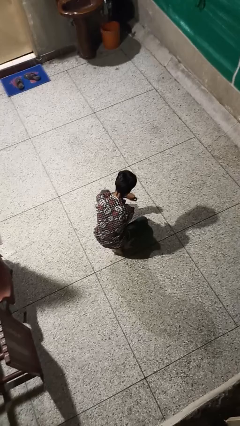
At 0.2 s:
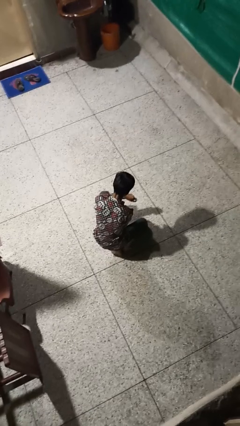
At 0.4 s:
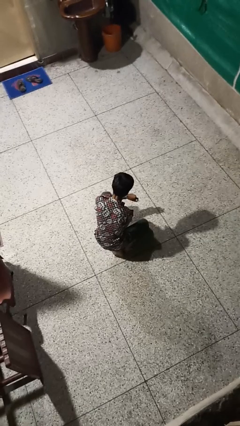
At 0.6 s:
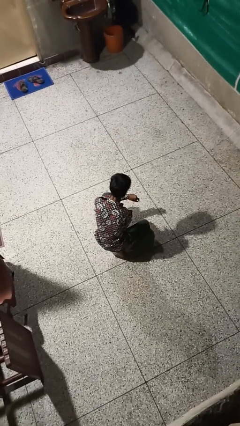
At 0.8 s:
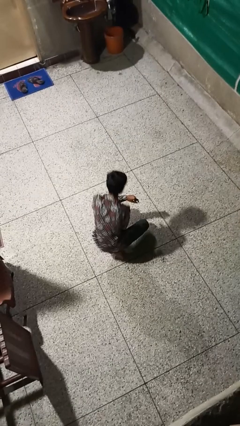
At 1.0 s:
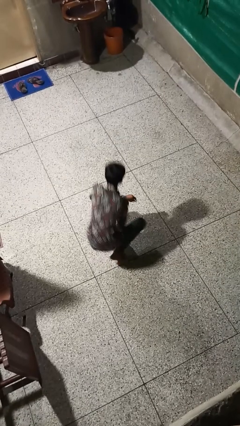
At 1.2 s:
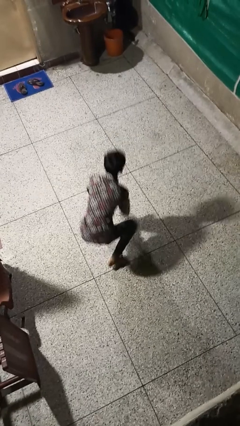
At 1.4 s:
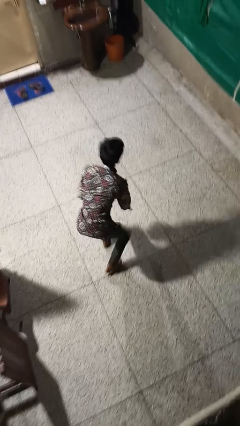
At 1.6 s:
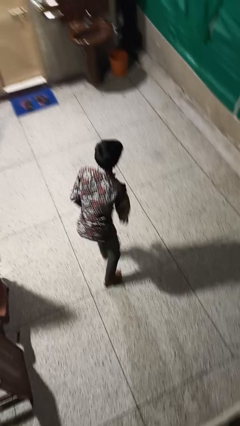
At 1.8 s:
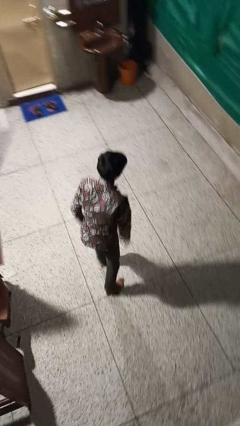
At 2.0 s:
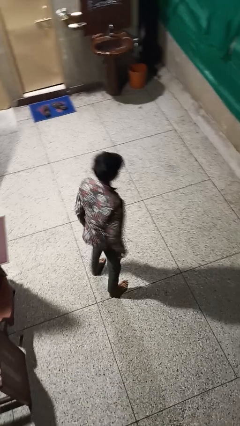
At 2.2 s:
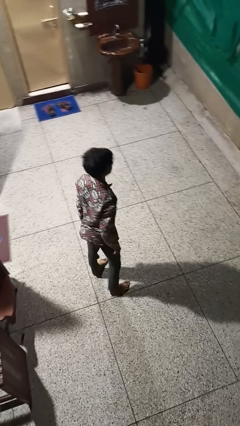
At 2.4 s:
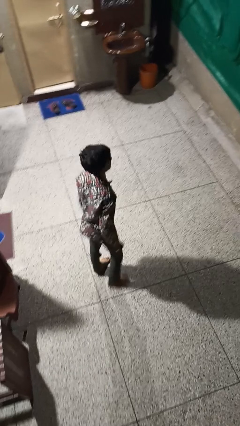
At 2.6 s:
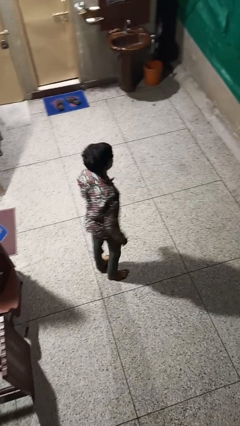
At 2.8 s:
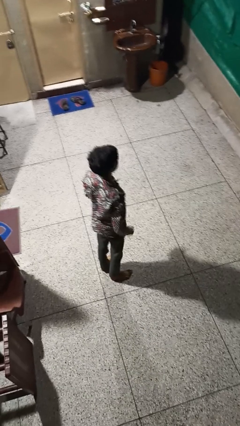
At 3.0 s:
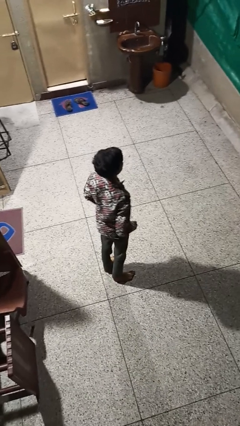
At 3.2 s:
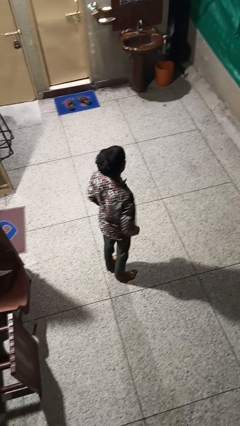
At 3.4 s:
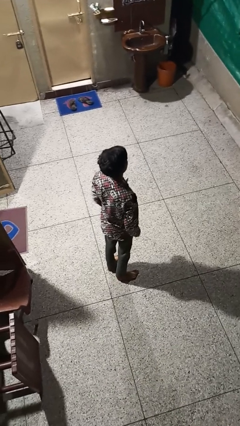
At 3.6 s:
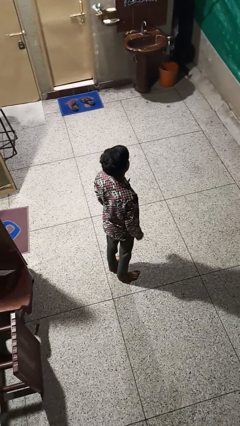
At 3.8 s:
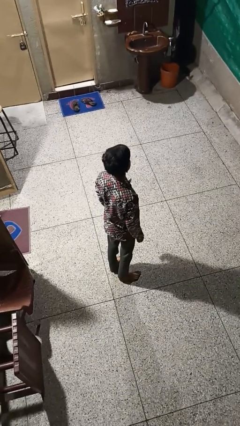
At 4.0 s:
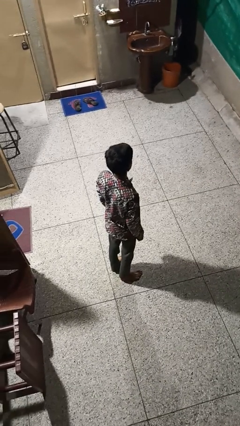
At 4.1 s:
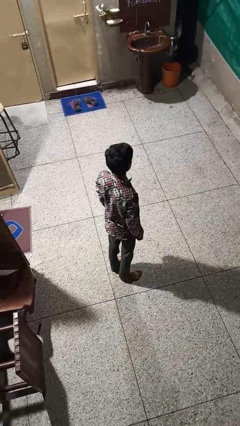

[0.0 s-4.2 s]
person stands up from floor

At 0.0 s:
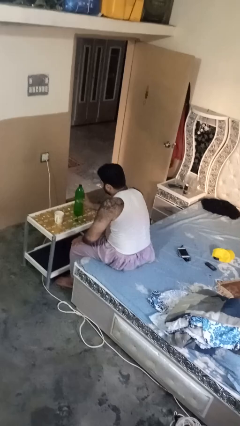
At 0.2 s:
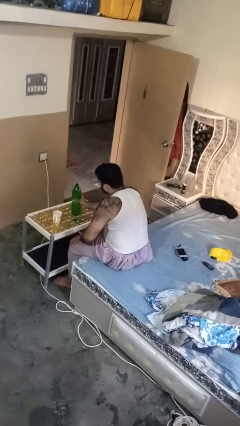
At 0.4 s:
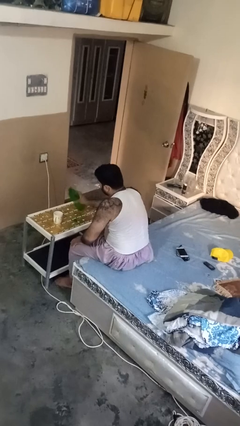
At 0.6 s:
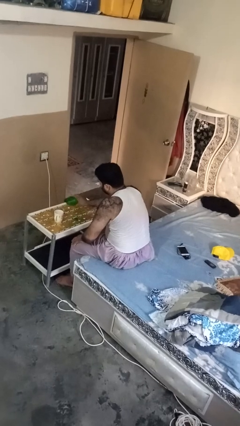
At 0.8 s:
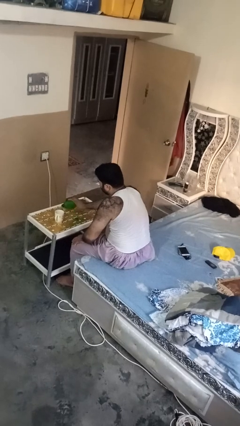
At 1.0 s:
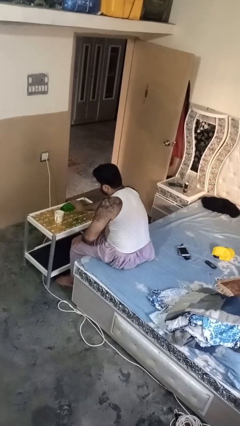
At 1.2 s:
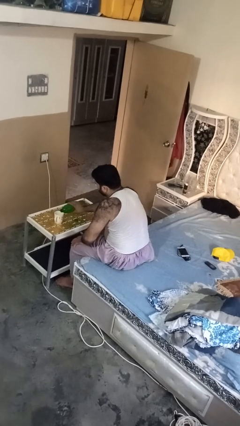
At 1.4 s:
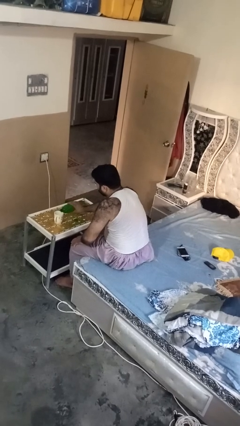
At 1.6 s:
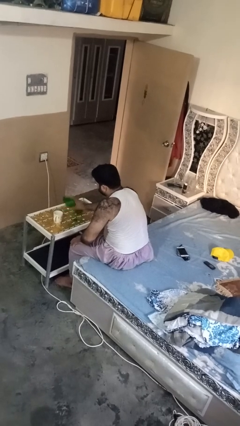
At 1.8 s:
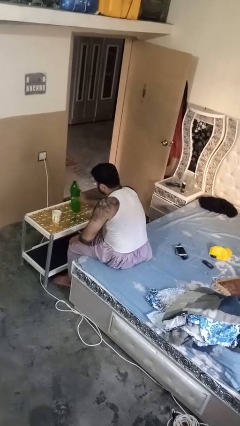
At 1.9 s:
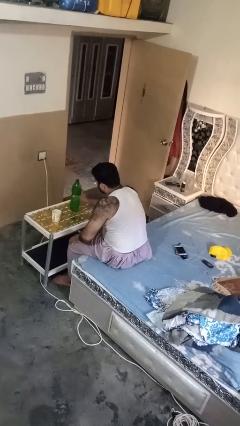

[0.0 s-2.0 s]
person pours liquid into cup

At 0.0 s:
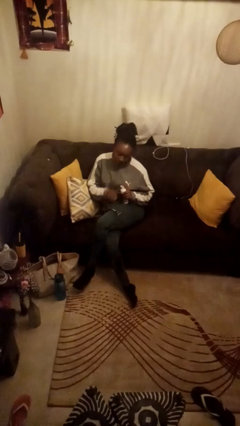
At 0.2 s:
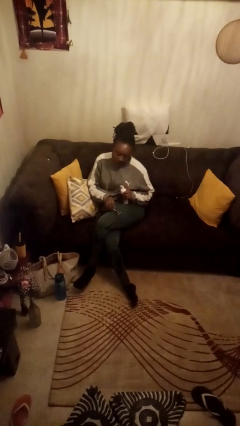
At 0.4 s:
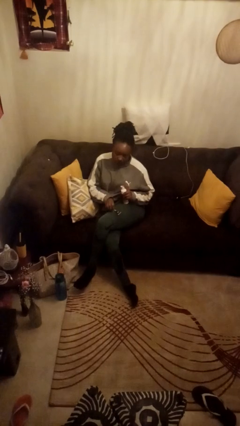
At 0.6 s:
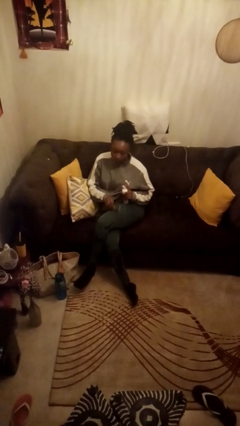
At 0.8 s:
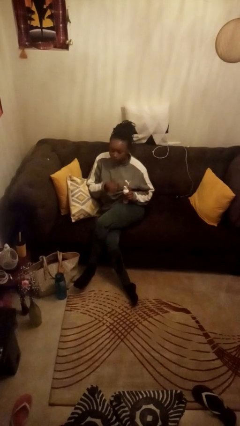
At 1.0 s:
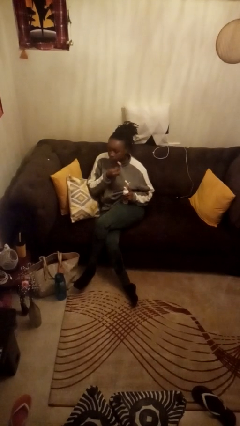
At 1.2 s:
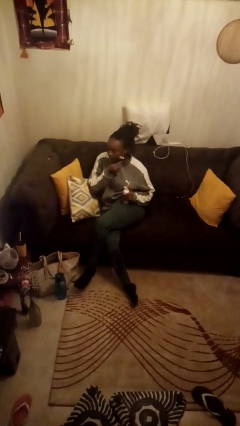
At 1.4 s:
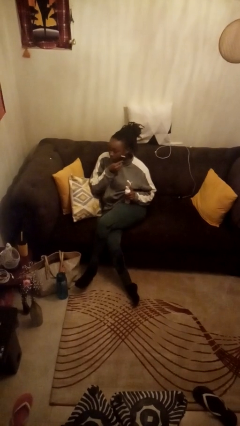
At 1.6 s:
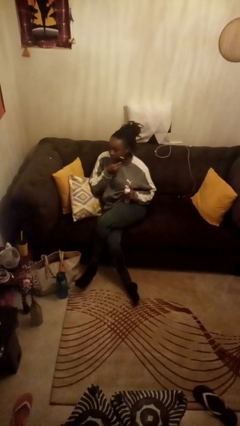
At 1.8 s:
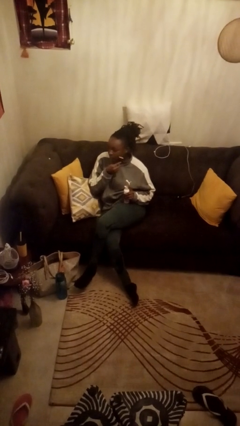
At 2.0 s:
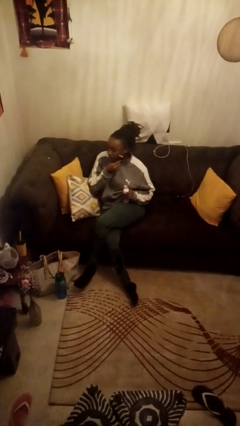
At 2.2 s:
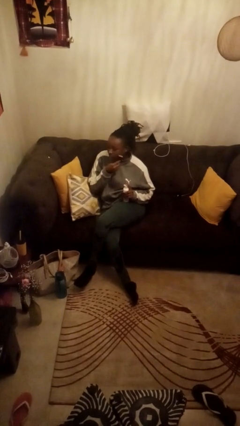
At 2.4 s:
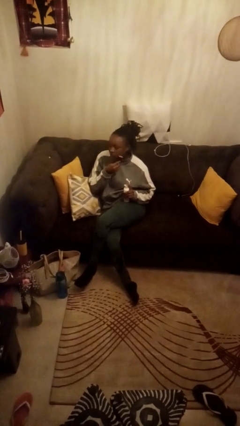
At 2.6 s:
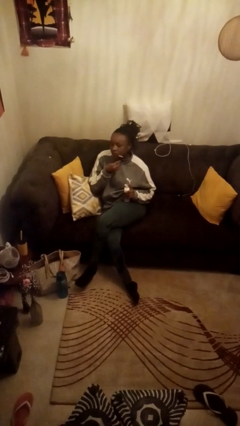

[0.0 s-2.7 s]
person shaves face

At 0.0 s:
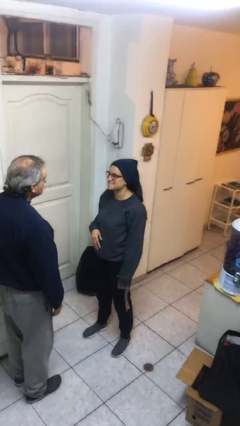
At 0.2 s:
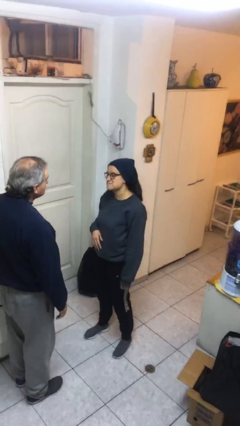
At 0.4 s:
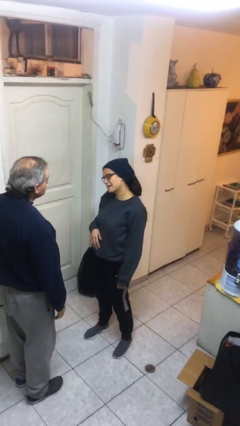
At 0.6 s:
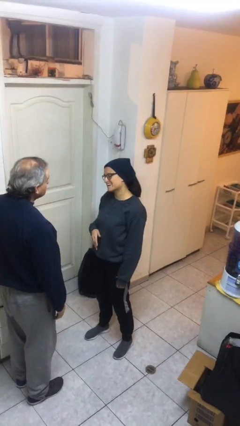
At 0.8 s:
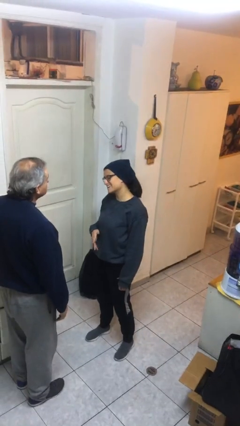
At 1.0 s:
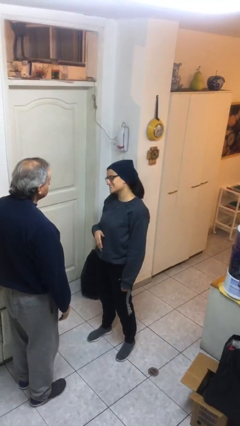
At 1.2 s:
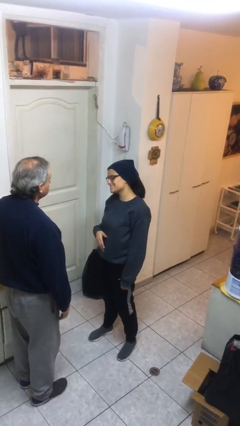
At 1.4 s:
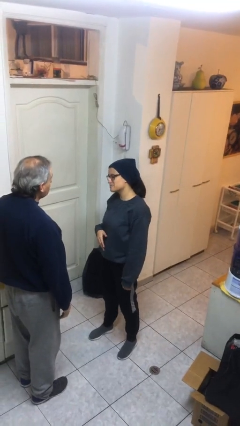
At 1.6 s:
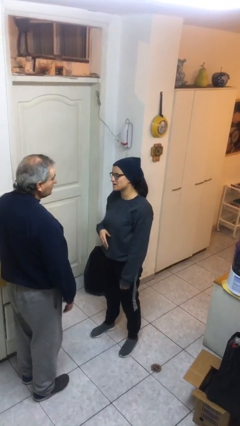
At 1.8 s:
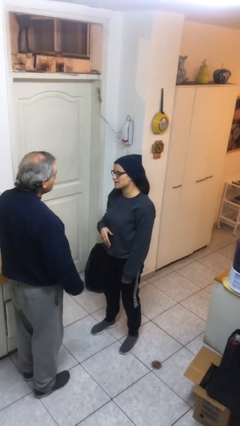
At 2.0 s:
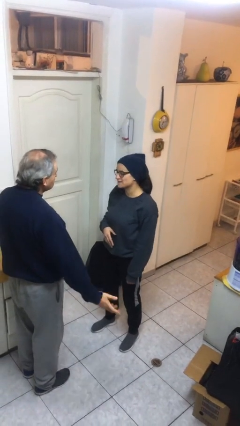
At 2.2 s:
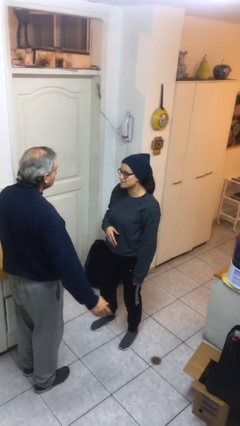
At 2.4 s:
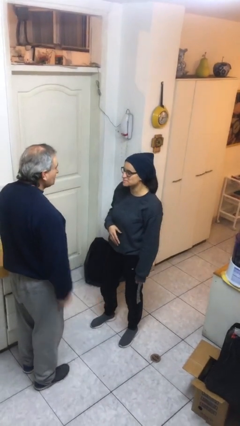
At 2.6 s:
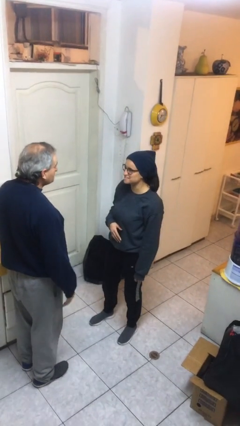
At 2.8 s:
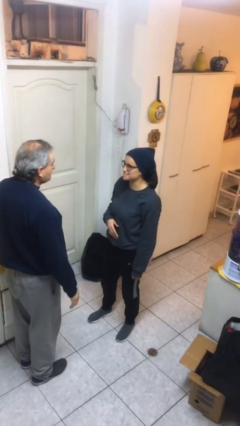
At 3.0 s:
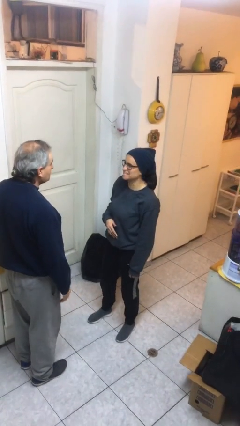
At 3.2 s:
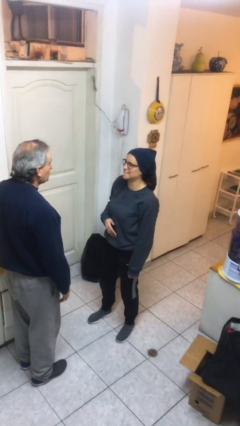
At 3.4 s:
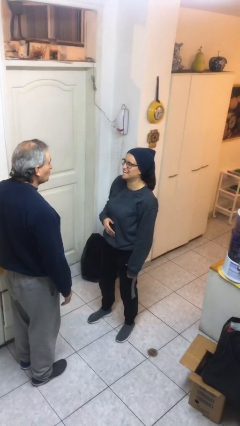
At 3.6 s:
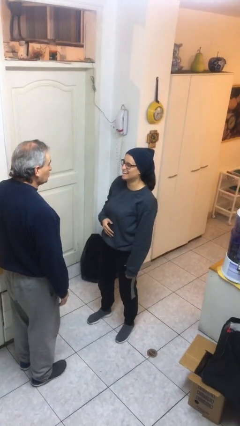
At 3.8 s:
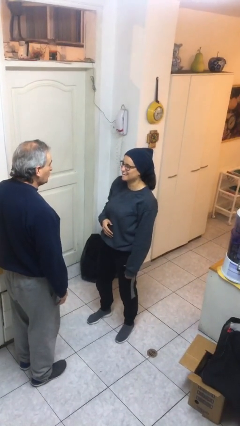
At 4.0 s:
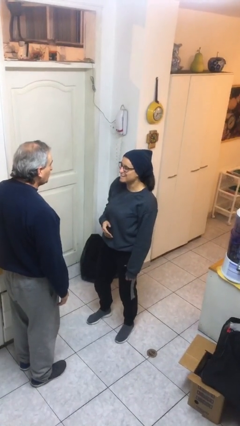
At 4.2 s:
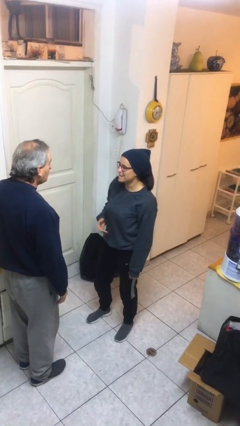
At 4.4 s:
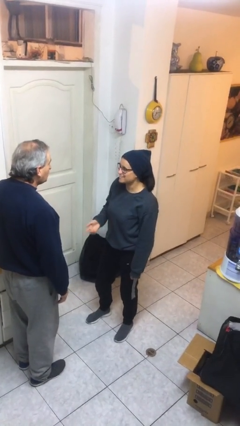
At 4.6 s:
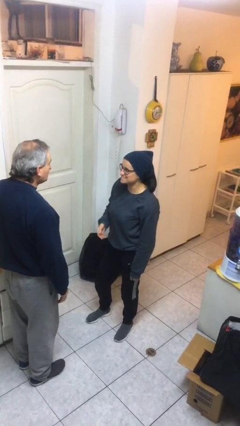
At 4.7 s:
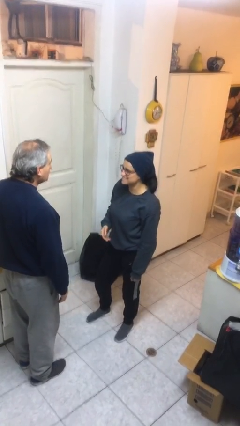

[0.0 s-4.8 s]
person talks to person

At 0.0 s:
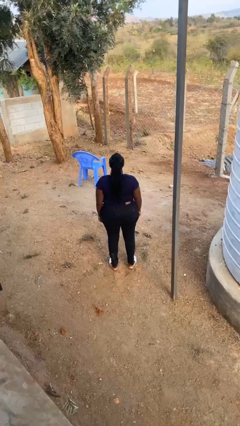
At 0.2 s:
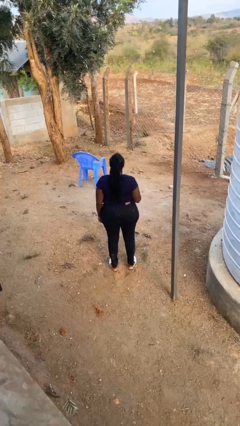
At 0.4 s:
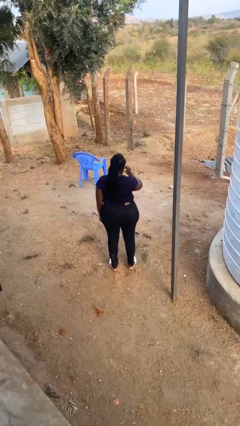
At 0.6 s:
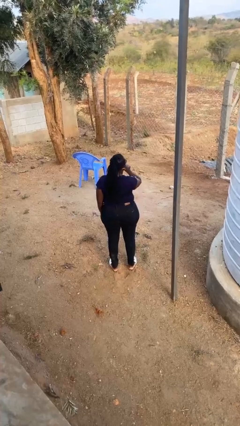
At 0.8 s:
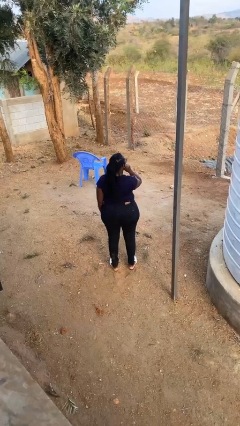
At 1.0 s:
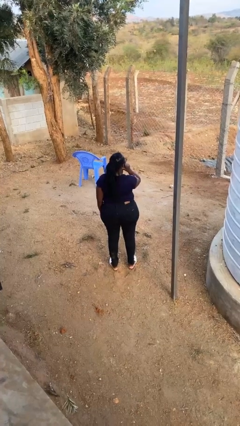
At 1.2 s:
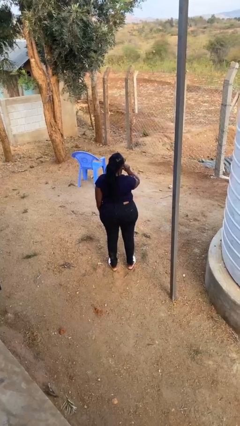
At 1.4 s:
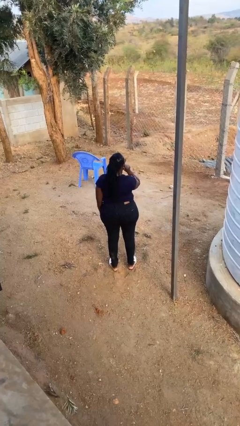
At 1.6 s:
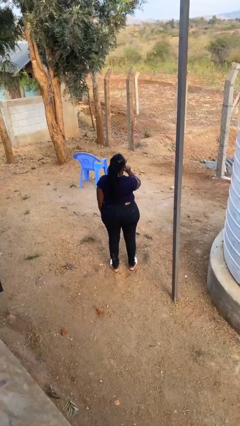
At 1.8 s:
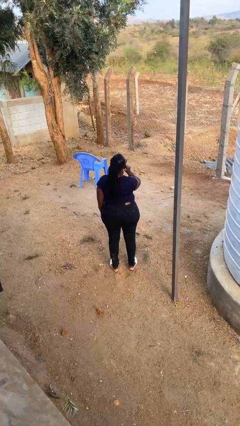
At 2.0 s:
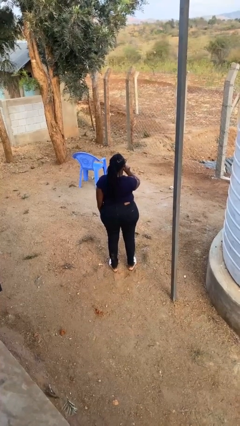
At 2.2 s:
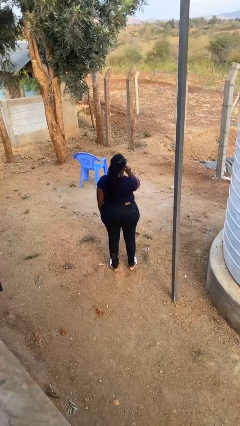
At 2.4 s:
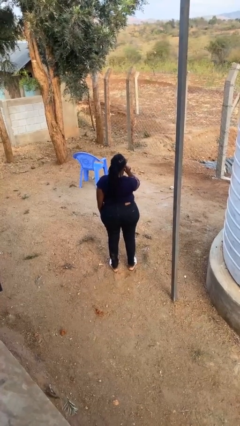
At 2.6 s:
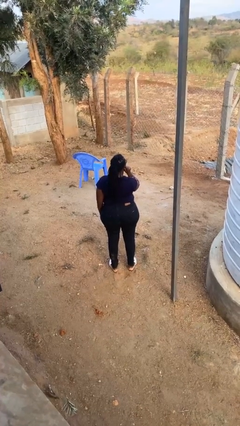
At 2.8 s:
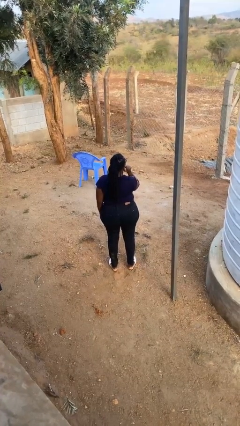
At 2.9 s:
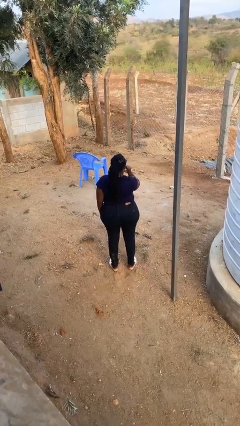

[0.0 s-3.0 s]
person touches earlobe

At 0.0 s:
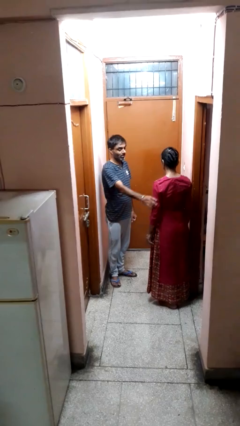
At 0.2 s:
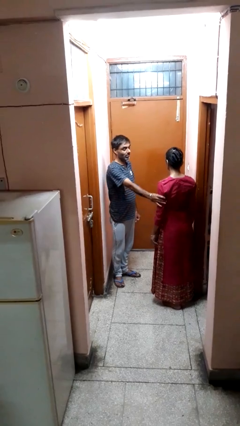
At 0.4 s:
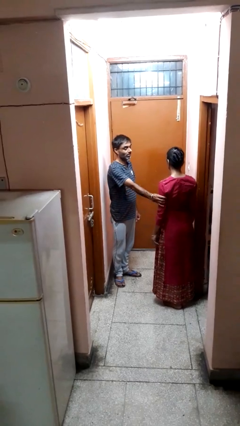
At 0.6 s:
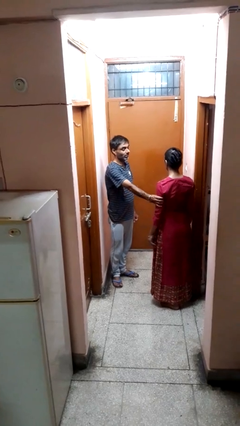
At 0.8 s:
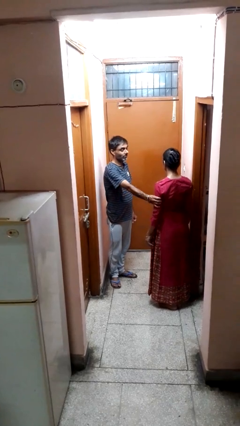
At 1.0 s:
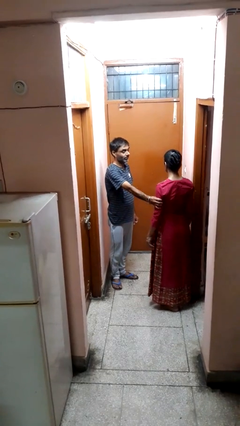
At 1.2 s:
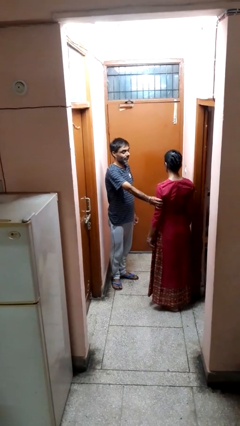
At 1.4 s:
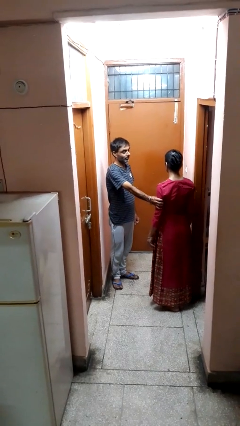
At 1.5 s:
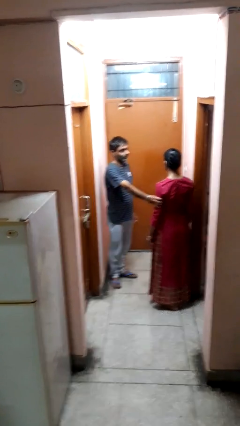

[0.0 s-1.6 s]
person grabs person by bicep
